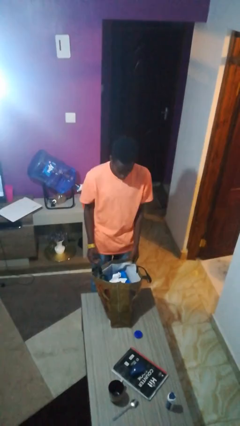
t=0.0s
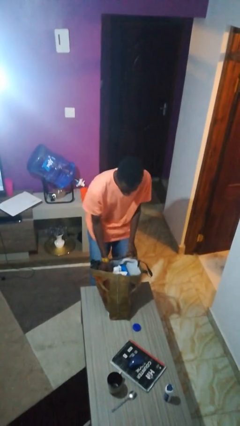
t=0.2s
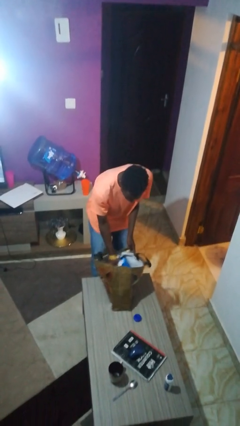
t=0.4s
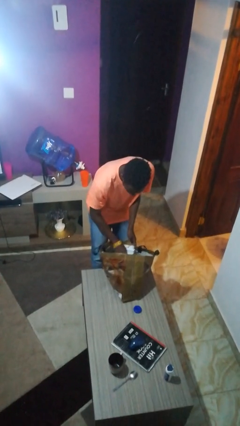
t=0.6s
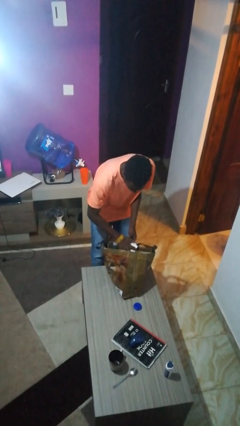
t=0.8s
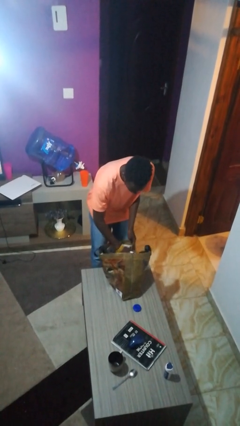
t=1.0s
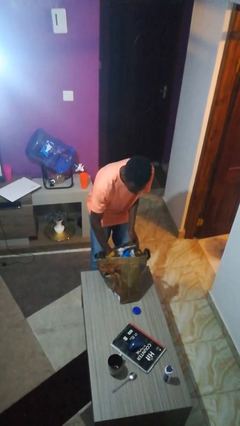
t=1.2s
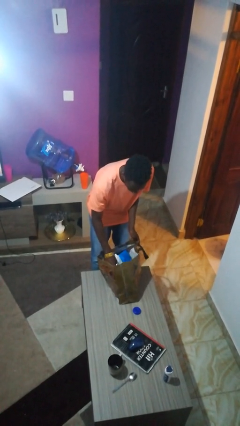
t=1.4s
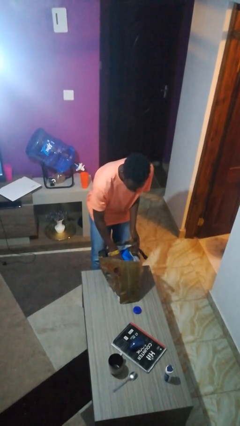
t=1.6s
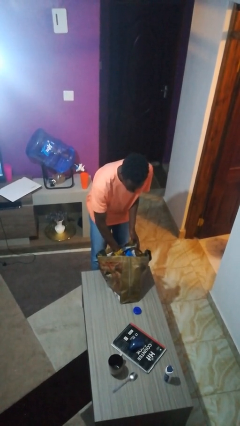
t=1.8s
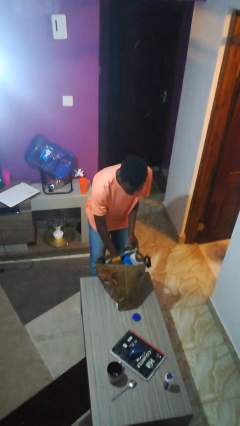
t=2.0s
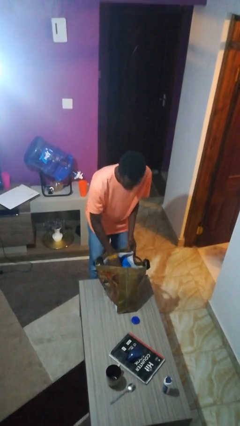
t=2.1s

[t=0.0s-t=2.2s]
person searches in bag

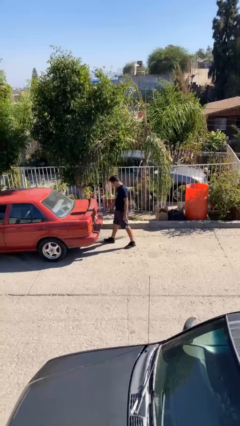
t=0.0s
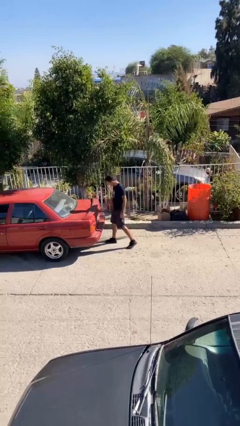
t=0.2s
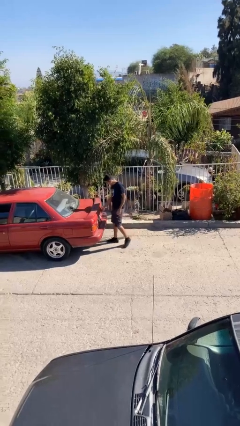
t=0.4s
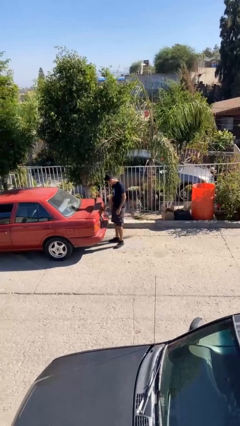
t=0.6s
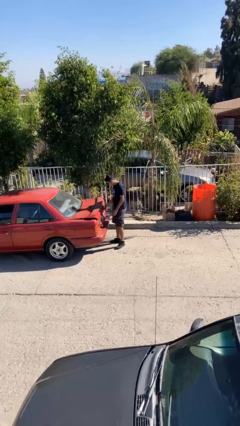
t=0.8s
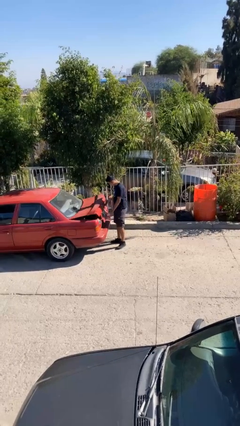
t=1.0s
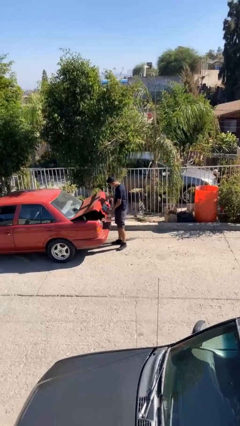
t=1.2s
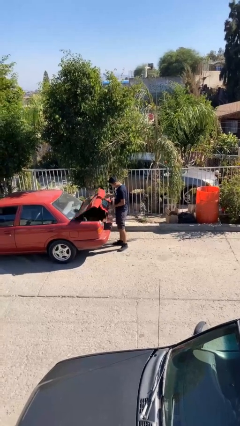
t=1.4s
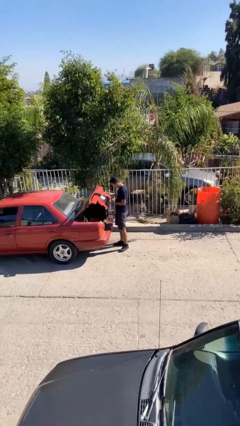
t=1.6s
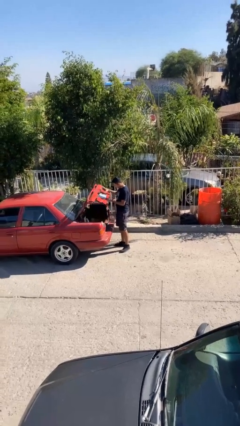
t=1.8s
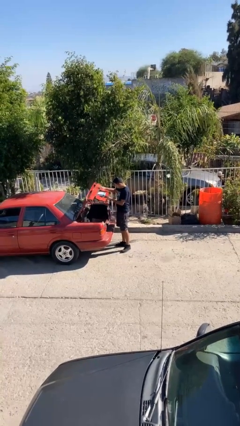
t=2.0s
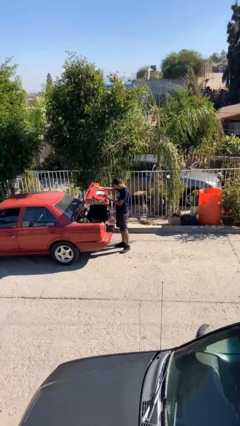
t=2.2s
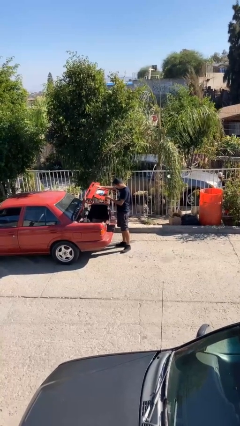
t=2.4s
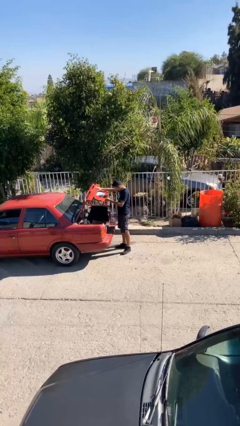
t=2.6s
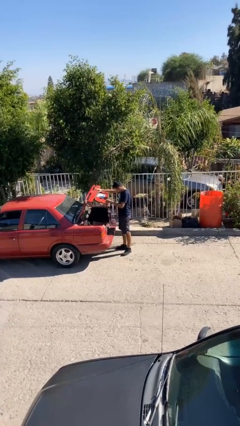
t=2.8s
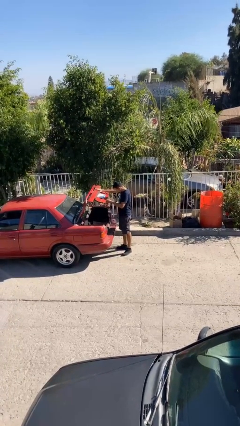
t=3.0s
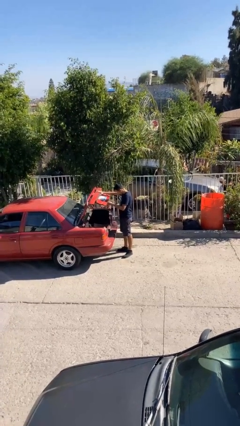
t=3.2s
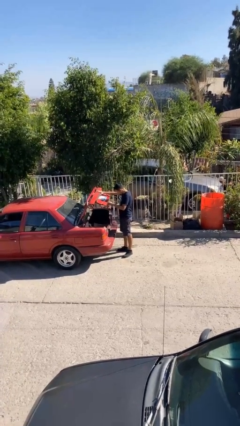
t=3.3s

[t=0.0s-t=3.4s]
person opens car trunk

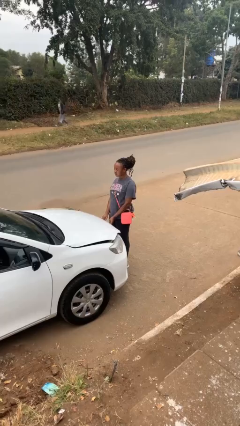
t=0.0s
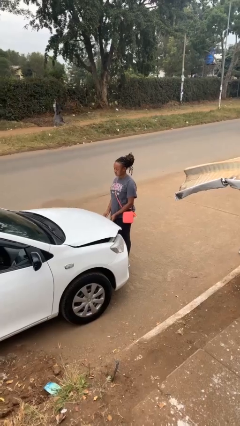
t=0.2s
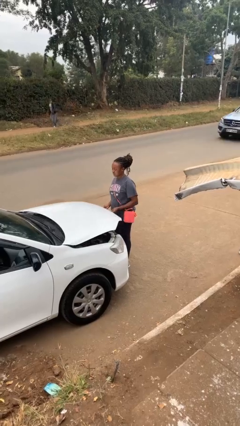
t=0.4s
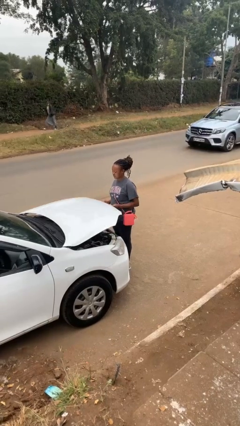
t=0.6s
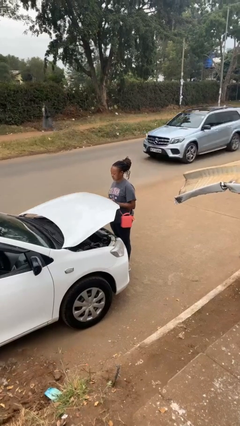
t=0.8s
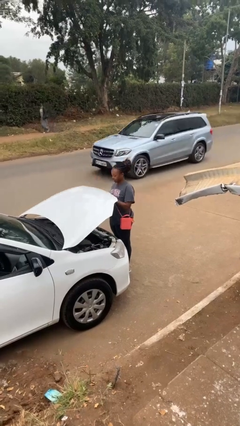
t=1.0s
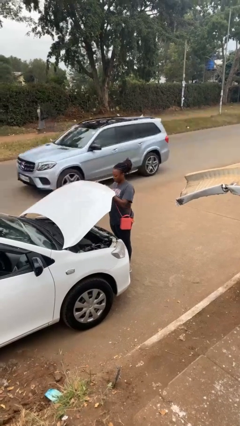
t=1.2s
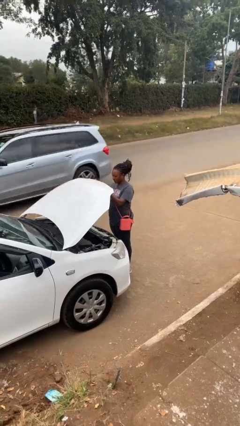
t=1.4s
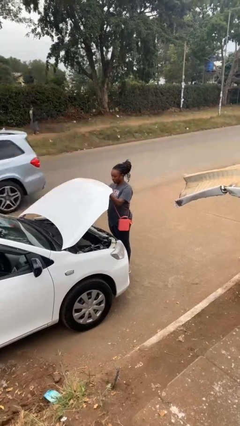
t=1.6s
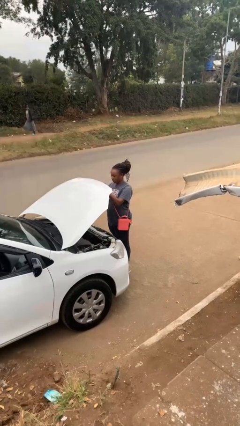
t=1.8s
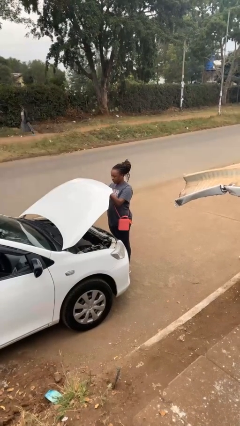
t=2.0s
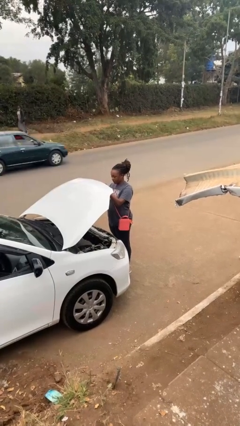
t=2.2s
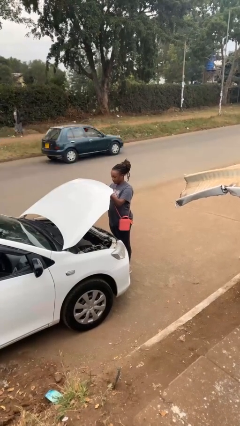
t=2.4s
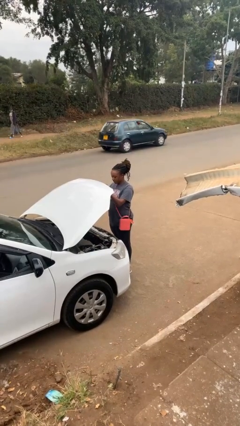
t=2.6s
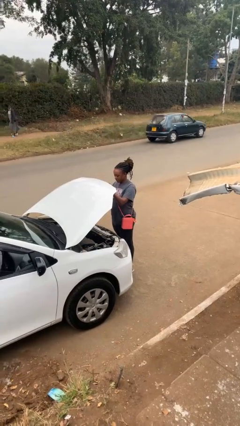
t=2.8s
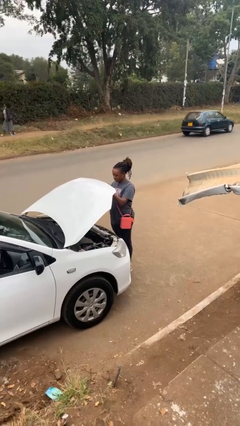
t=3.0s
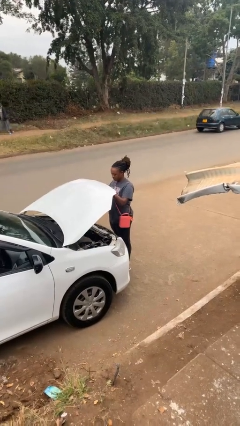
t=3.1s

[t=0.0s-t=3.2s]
person opens car hood

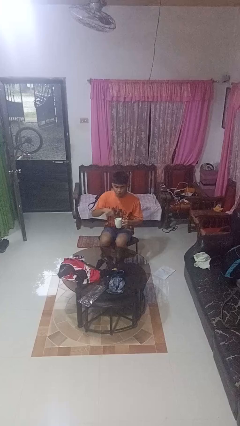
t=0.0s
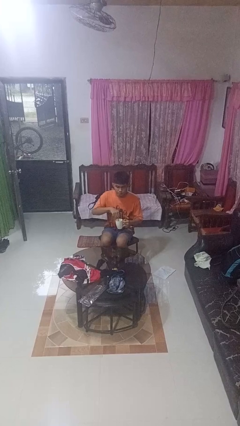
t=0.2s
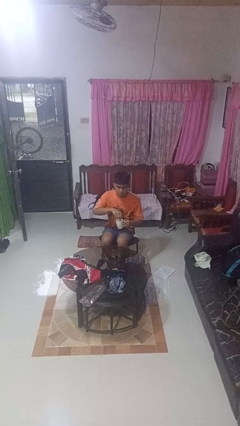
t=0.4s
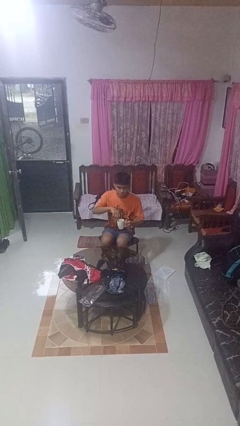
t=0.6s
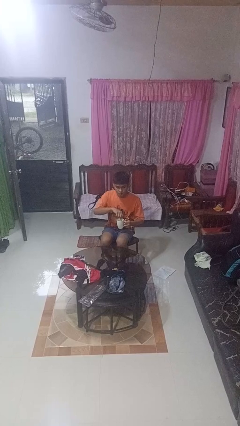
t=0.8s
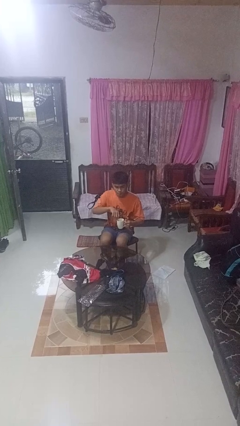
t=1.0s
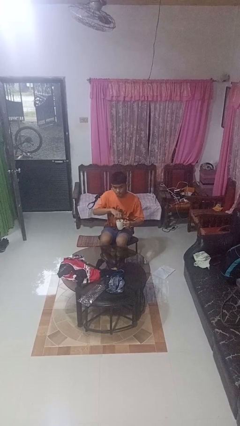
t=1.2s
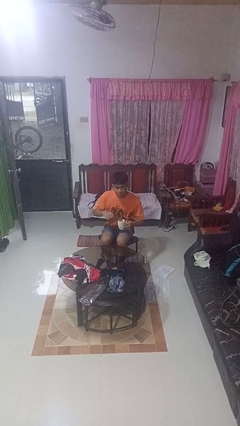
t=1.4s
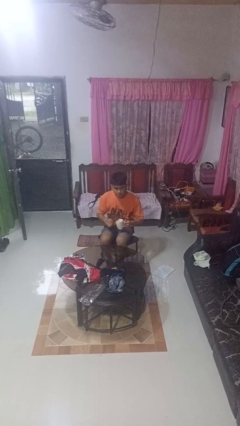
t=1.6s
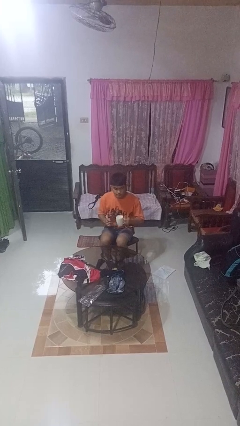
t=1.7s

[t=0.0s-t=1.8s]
person stirs mug

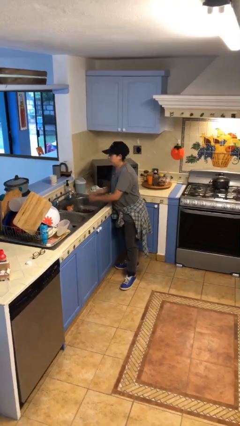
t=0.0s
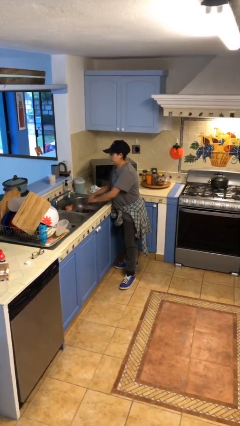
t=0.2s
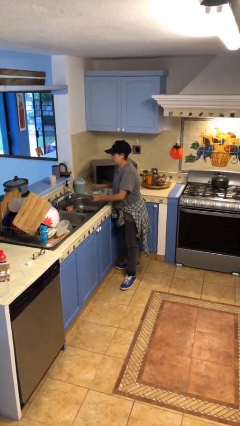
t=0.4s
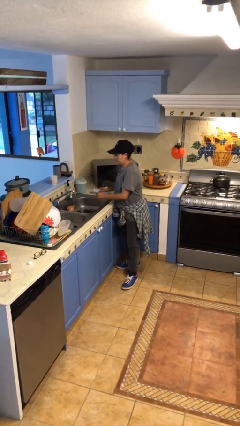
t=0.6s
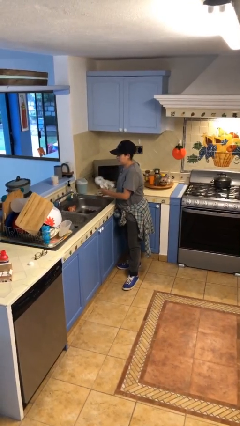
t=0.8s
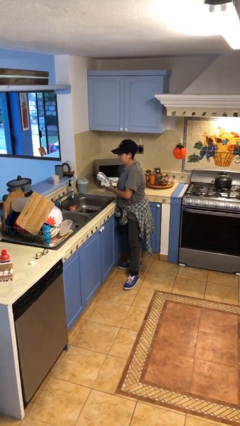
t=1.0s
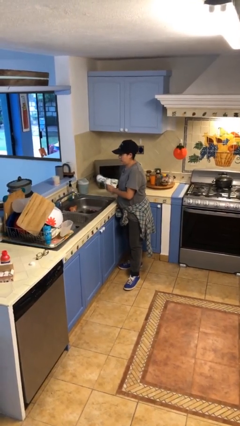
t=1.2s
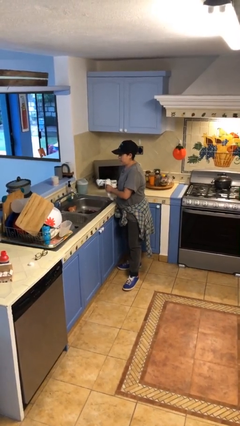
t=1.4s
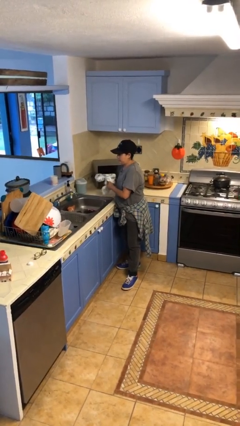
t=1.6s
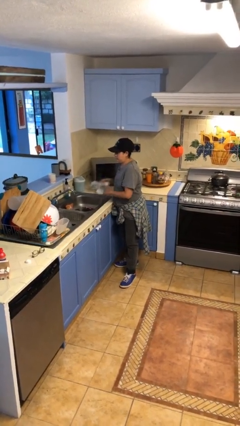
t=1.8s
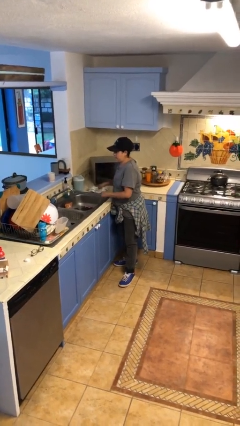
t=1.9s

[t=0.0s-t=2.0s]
person dries hands with towel

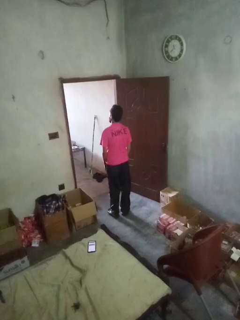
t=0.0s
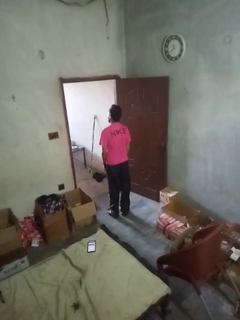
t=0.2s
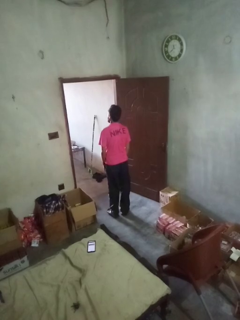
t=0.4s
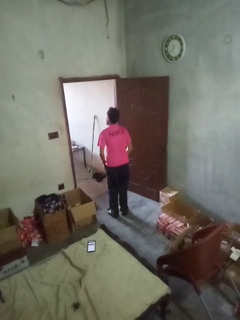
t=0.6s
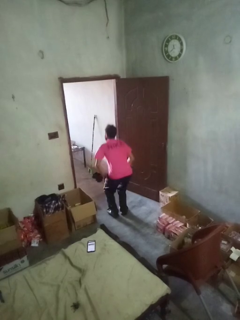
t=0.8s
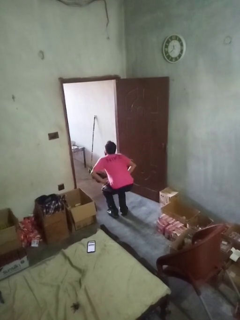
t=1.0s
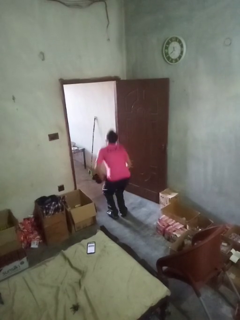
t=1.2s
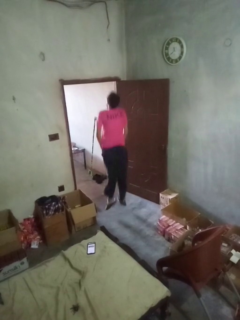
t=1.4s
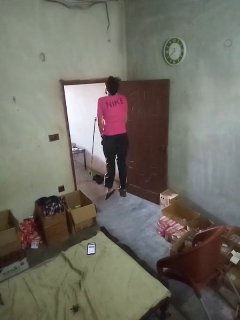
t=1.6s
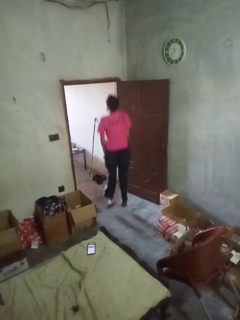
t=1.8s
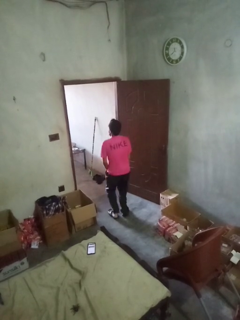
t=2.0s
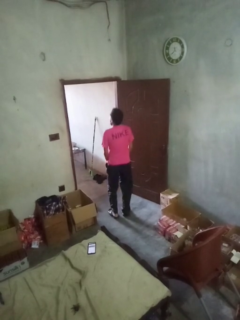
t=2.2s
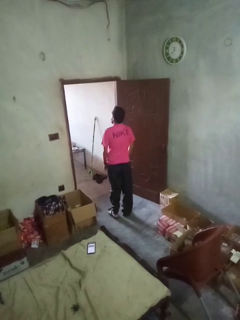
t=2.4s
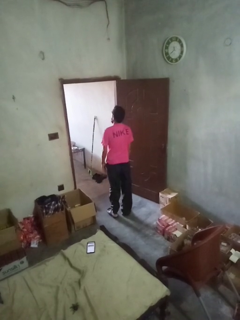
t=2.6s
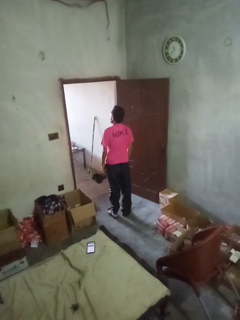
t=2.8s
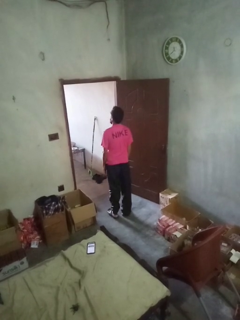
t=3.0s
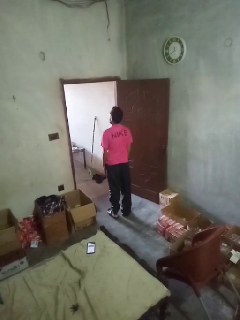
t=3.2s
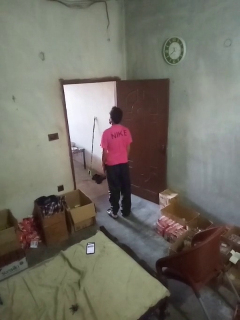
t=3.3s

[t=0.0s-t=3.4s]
person jumps

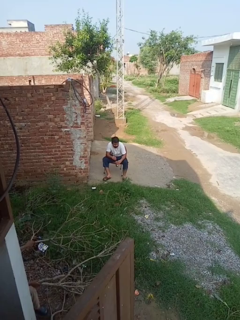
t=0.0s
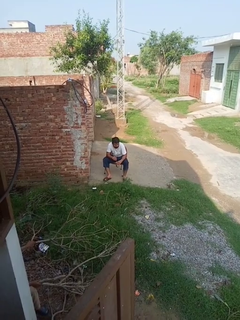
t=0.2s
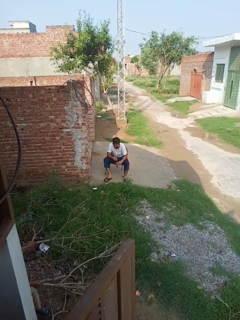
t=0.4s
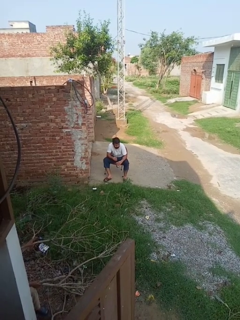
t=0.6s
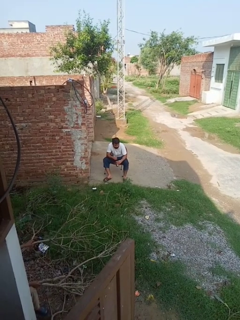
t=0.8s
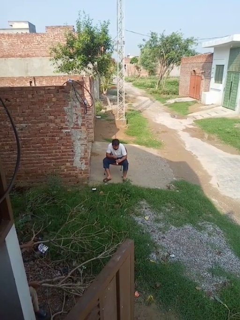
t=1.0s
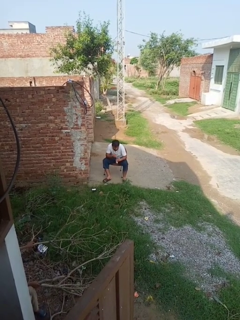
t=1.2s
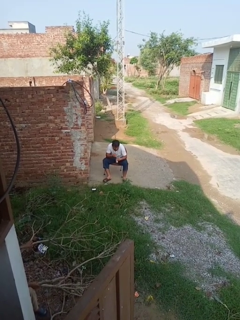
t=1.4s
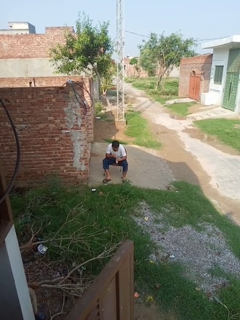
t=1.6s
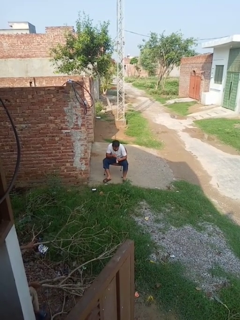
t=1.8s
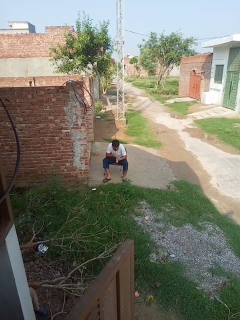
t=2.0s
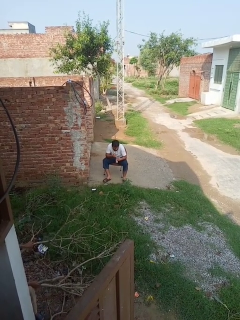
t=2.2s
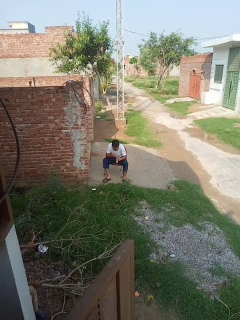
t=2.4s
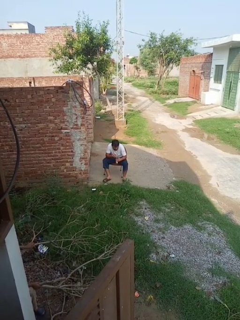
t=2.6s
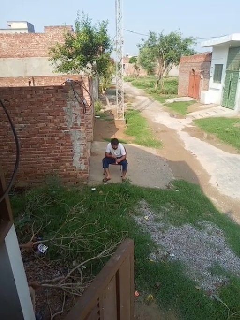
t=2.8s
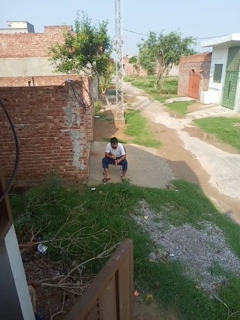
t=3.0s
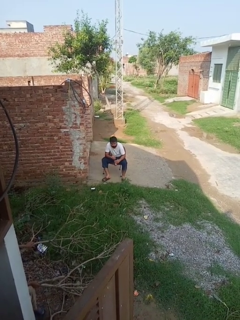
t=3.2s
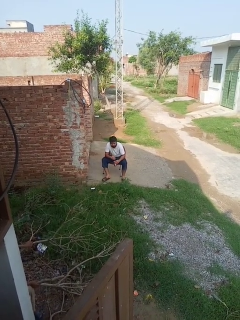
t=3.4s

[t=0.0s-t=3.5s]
person drinks from straw
